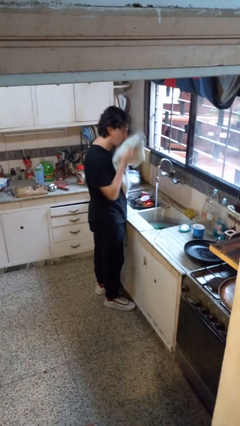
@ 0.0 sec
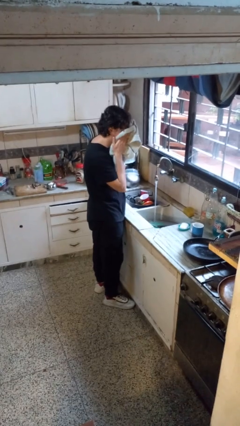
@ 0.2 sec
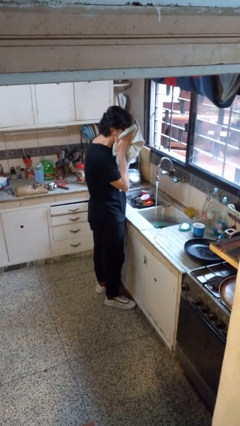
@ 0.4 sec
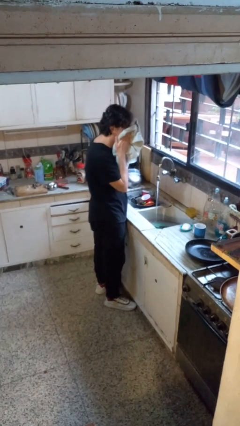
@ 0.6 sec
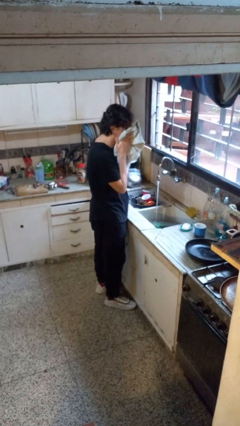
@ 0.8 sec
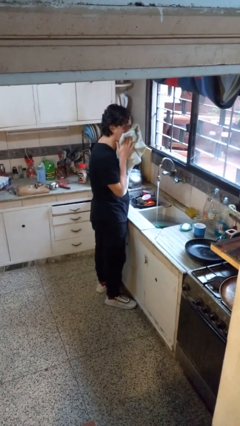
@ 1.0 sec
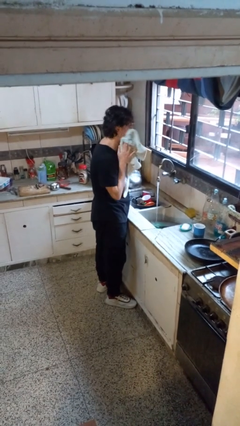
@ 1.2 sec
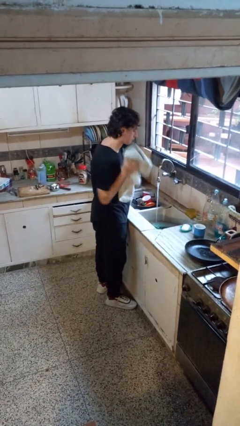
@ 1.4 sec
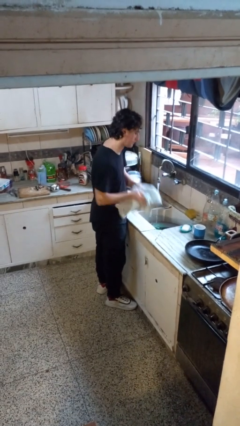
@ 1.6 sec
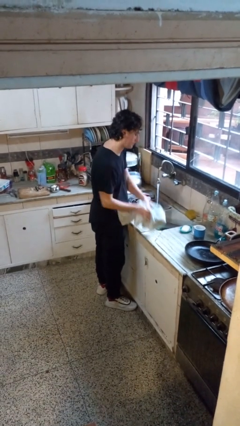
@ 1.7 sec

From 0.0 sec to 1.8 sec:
person dries face with towel

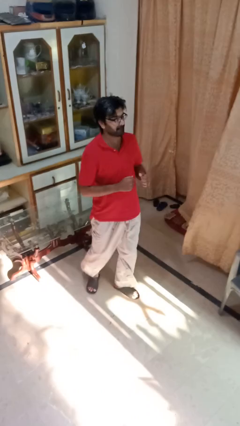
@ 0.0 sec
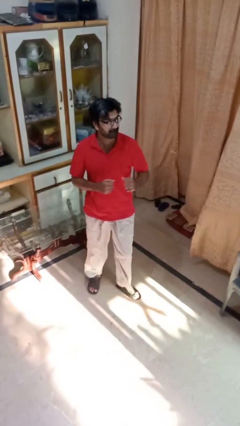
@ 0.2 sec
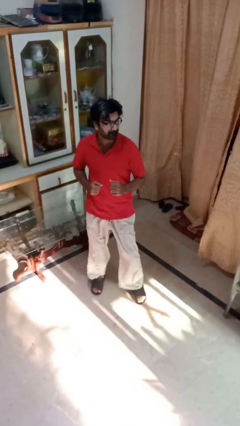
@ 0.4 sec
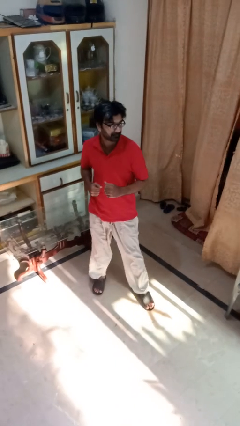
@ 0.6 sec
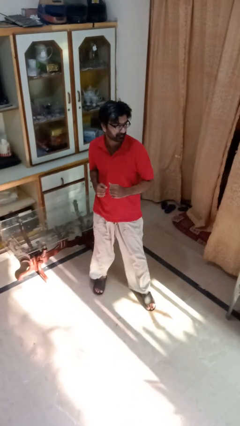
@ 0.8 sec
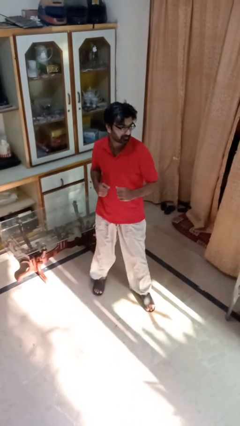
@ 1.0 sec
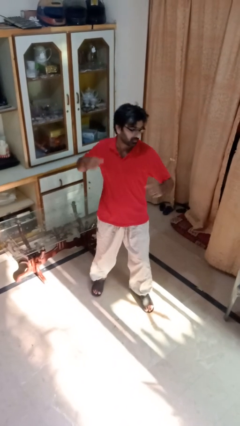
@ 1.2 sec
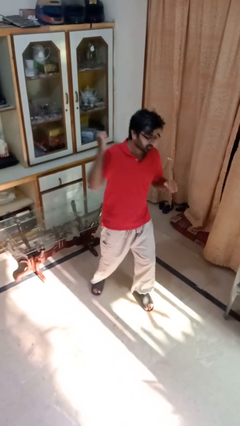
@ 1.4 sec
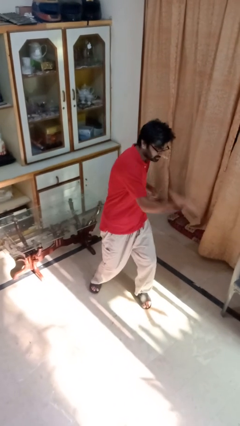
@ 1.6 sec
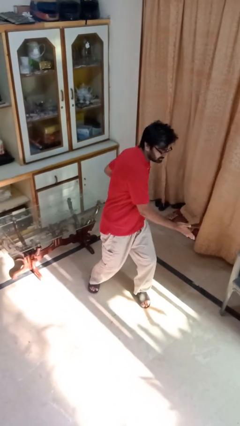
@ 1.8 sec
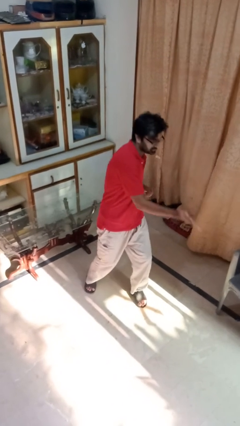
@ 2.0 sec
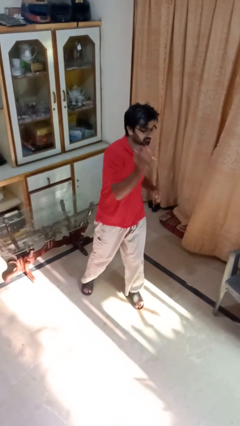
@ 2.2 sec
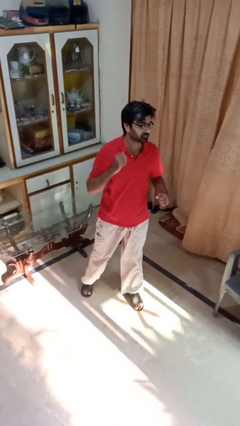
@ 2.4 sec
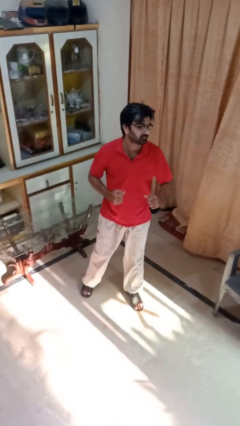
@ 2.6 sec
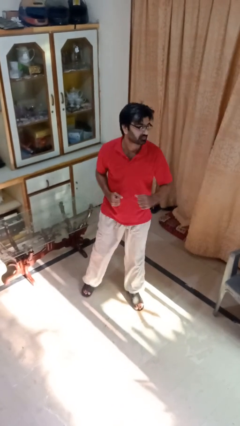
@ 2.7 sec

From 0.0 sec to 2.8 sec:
person karate chop

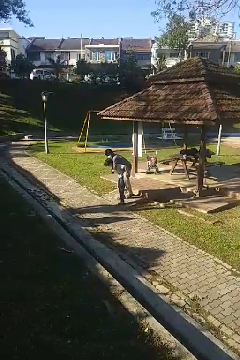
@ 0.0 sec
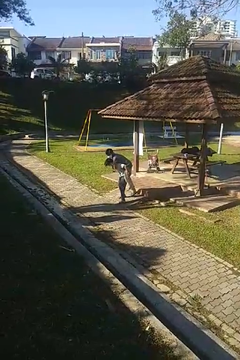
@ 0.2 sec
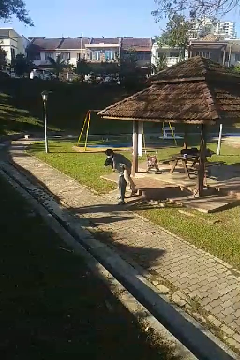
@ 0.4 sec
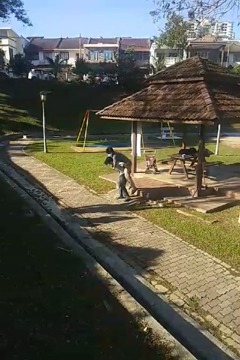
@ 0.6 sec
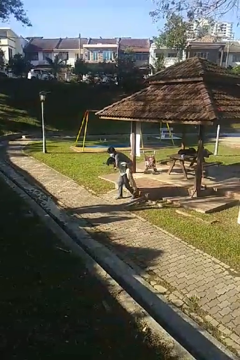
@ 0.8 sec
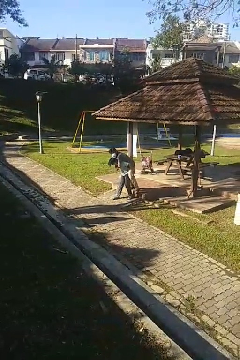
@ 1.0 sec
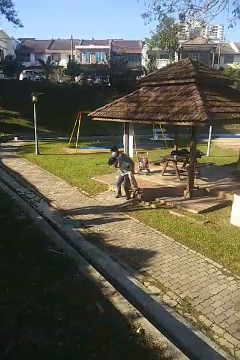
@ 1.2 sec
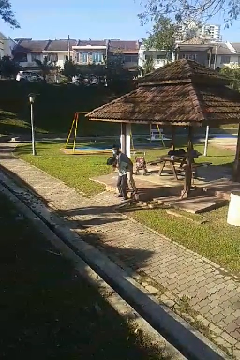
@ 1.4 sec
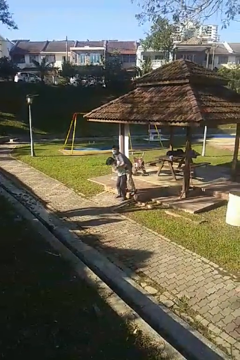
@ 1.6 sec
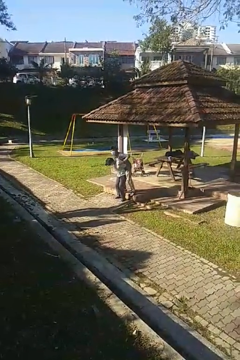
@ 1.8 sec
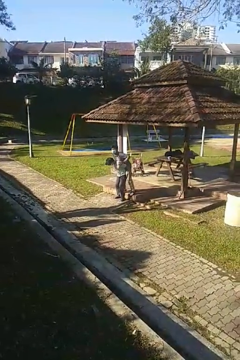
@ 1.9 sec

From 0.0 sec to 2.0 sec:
person puts down person

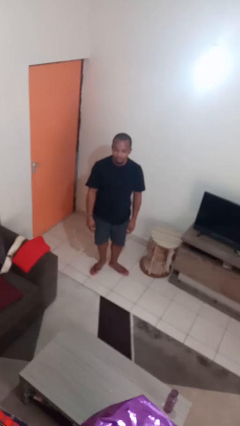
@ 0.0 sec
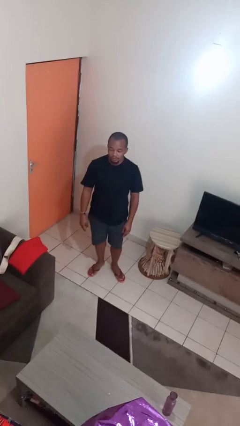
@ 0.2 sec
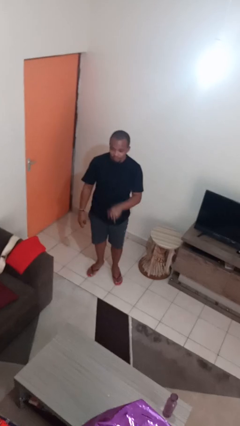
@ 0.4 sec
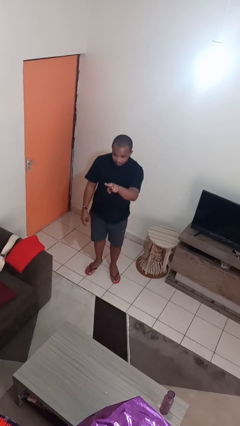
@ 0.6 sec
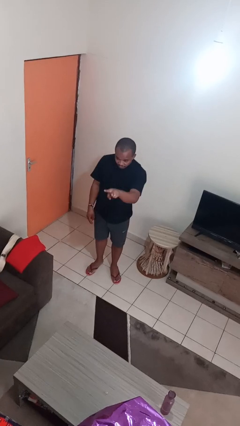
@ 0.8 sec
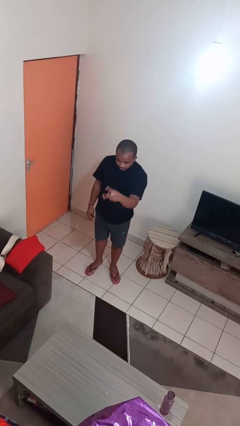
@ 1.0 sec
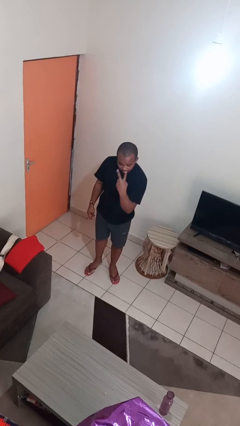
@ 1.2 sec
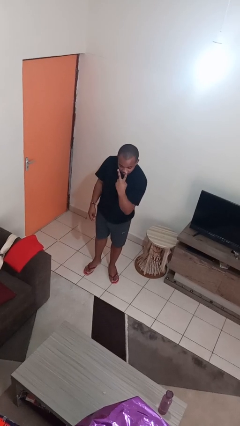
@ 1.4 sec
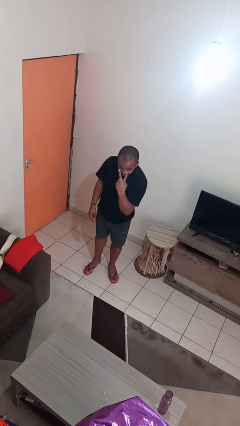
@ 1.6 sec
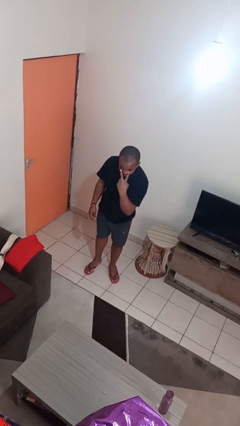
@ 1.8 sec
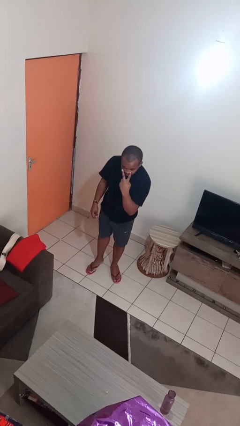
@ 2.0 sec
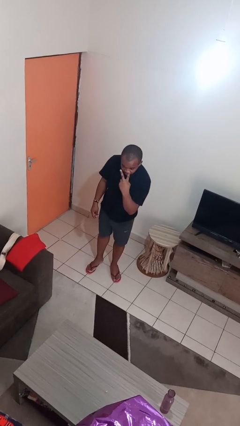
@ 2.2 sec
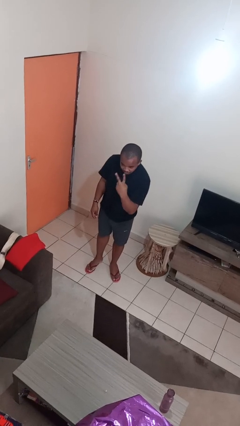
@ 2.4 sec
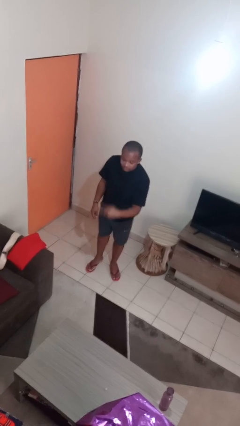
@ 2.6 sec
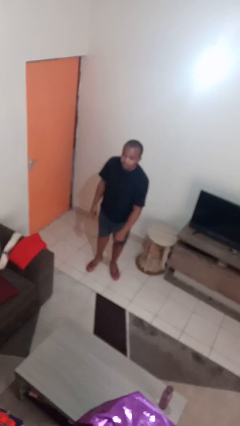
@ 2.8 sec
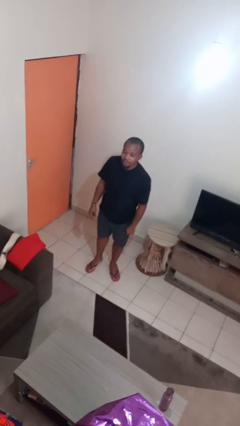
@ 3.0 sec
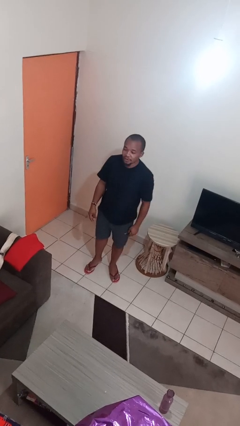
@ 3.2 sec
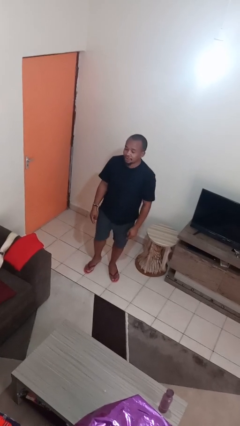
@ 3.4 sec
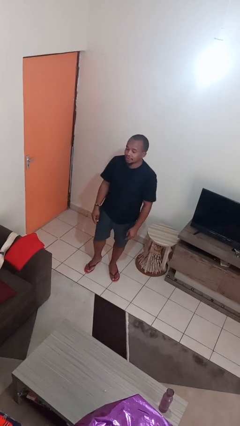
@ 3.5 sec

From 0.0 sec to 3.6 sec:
person gestures watch closely

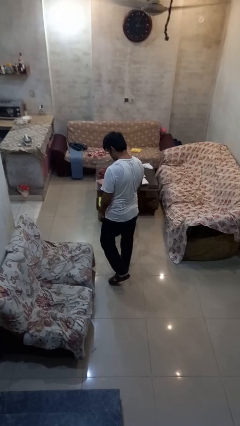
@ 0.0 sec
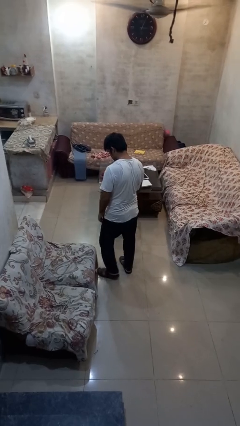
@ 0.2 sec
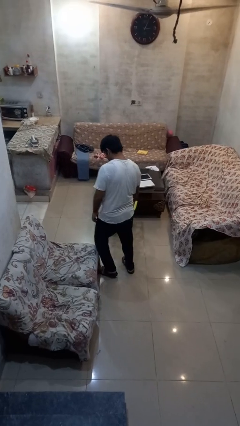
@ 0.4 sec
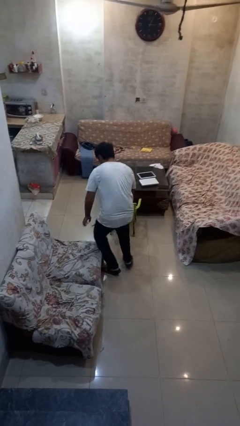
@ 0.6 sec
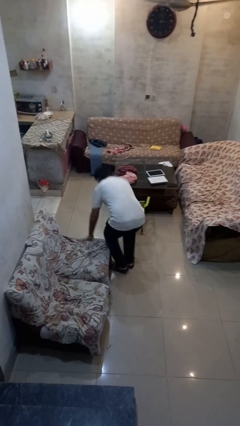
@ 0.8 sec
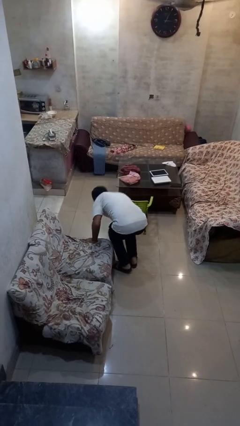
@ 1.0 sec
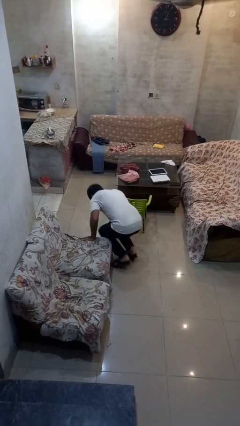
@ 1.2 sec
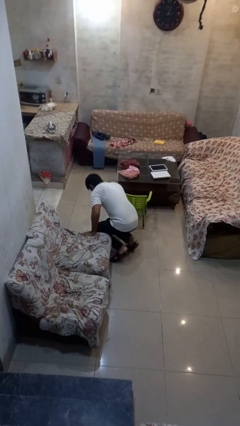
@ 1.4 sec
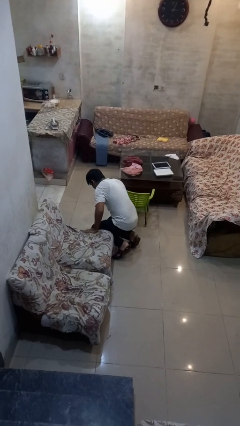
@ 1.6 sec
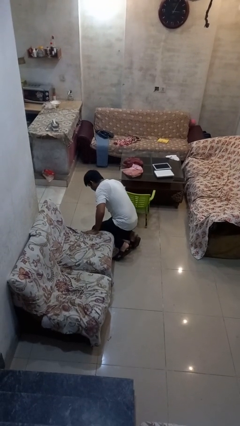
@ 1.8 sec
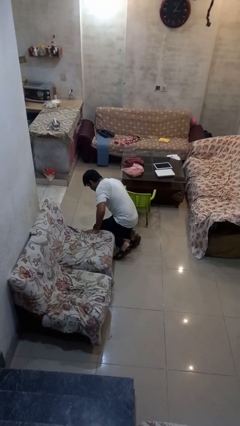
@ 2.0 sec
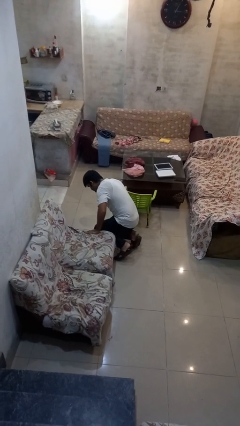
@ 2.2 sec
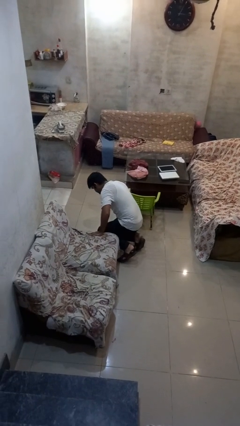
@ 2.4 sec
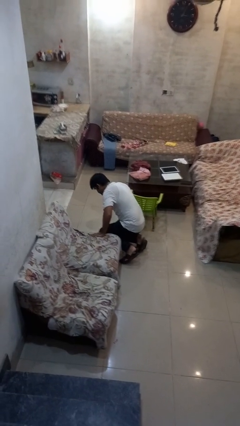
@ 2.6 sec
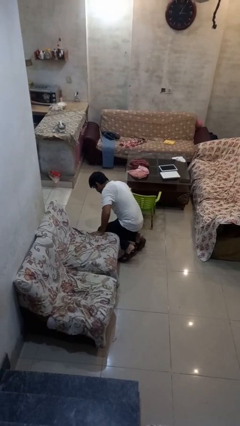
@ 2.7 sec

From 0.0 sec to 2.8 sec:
person trips on object on floor

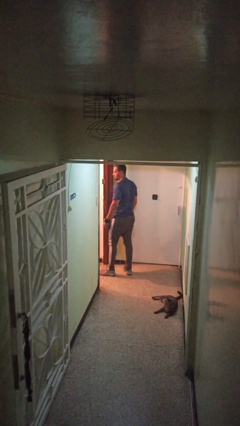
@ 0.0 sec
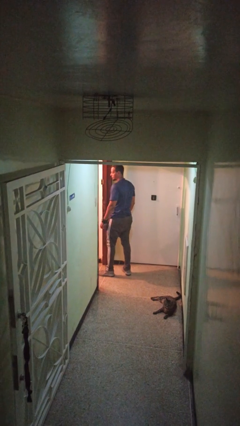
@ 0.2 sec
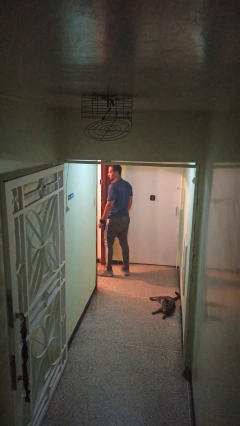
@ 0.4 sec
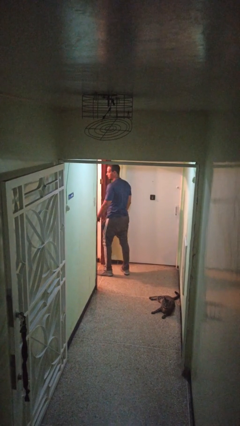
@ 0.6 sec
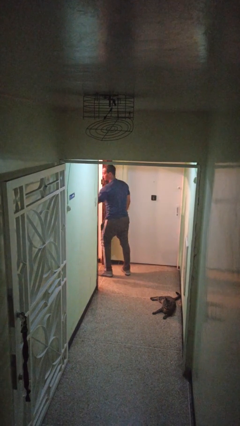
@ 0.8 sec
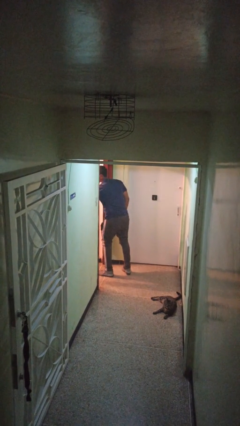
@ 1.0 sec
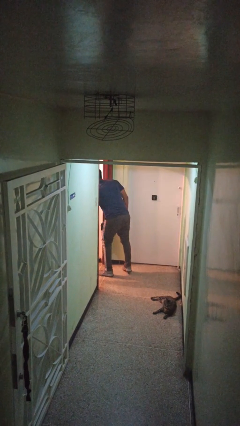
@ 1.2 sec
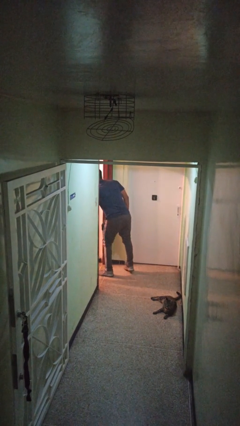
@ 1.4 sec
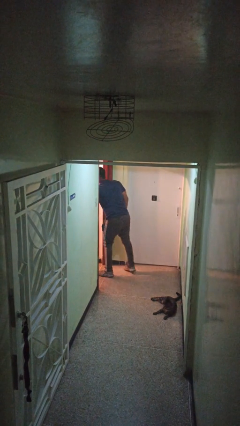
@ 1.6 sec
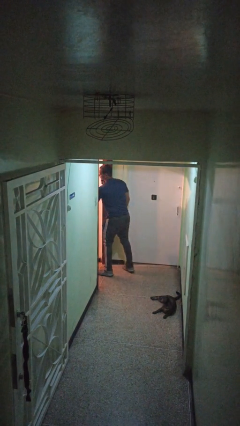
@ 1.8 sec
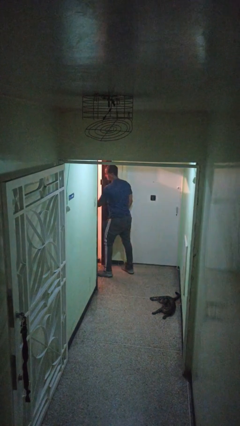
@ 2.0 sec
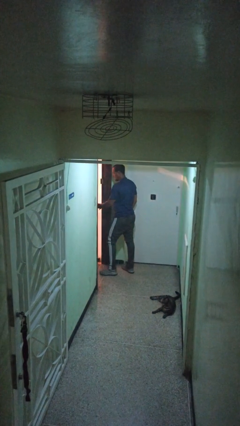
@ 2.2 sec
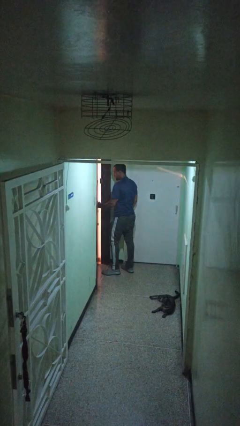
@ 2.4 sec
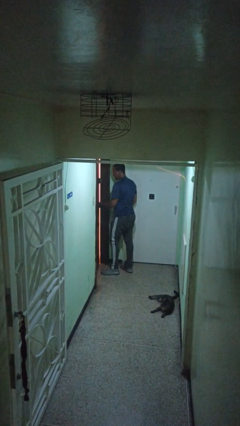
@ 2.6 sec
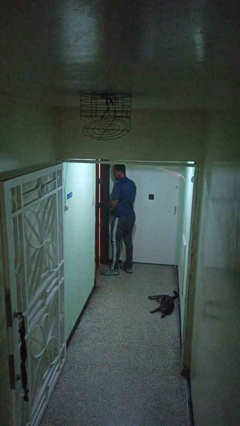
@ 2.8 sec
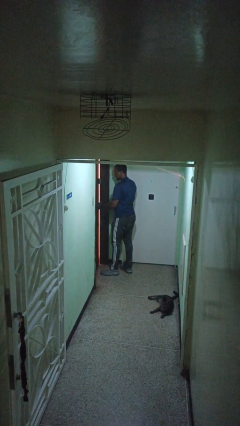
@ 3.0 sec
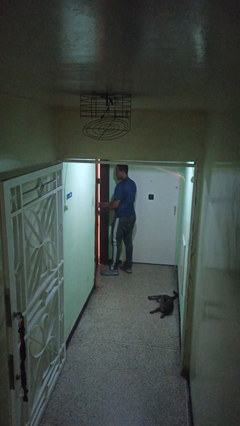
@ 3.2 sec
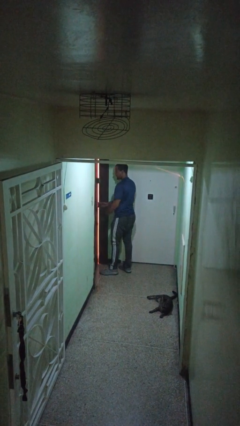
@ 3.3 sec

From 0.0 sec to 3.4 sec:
person closes facility door

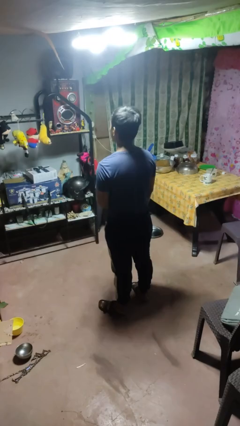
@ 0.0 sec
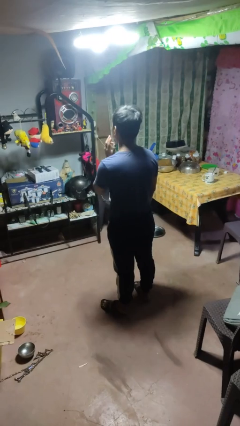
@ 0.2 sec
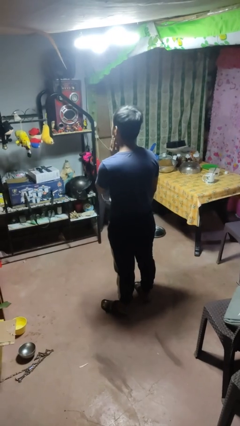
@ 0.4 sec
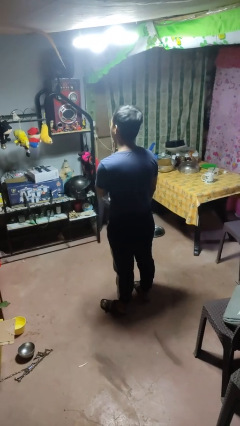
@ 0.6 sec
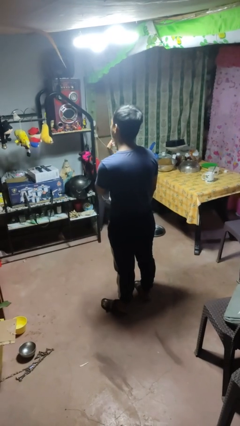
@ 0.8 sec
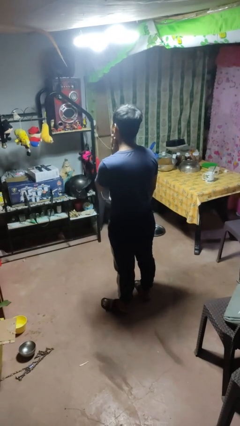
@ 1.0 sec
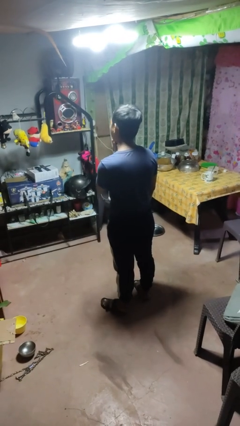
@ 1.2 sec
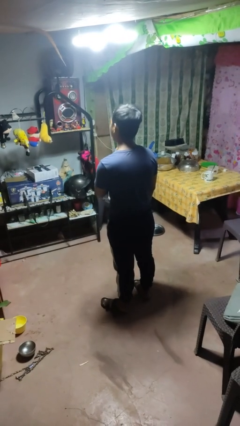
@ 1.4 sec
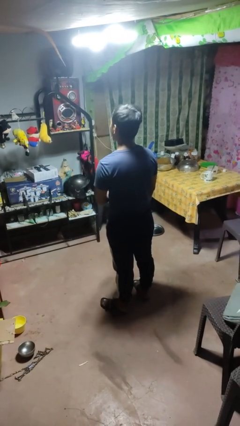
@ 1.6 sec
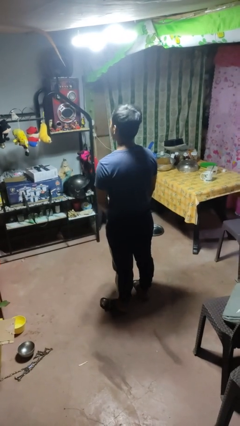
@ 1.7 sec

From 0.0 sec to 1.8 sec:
person strokes chin
